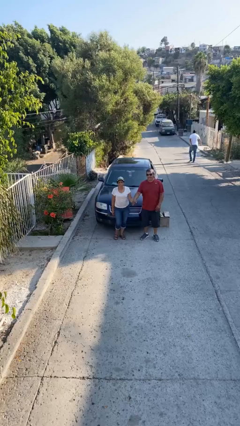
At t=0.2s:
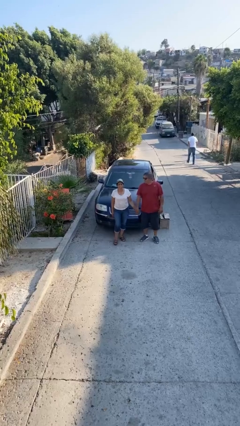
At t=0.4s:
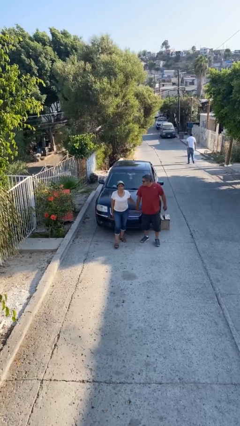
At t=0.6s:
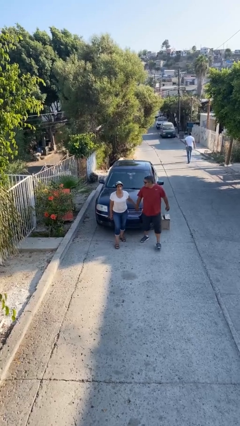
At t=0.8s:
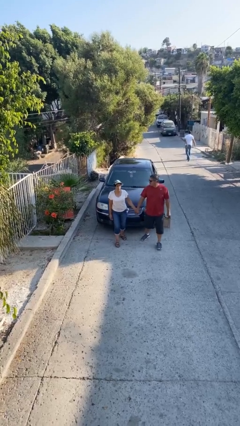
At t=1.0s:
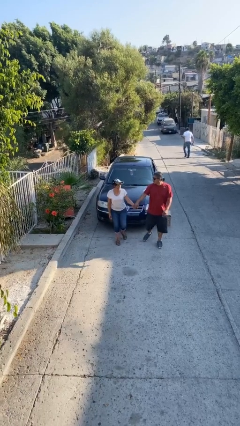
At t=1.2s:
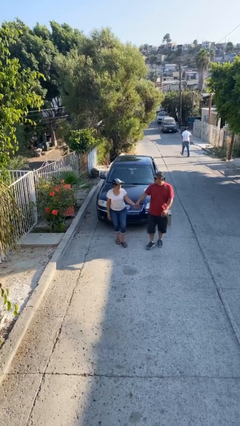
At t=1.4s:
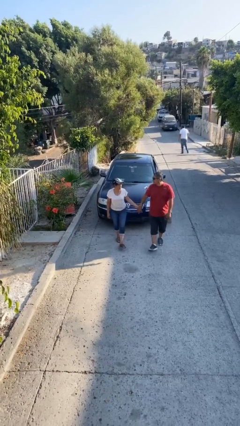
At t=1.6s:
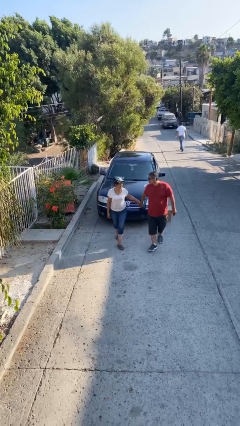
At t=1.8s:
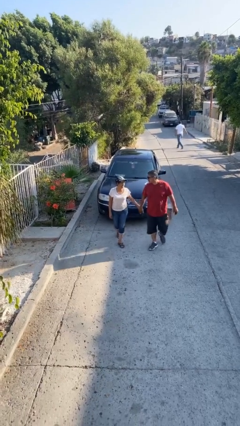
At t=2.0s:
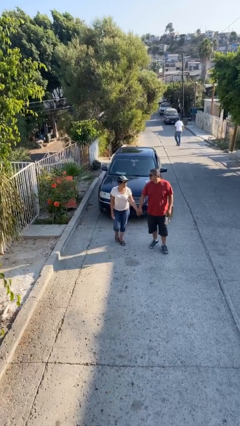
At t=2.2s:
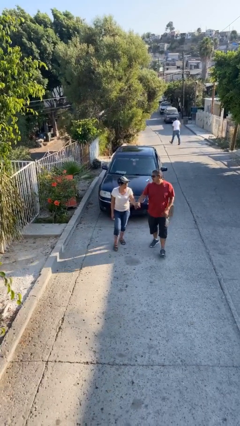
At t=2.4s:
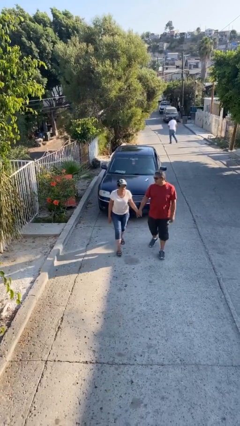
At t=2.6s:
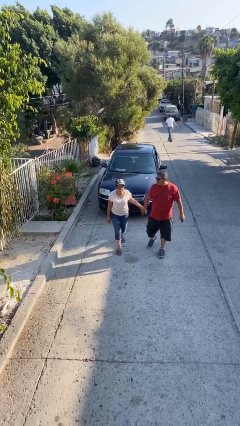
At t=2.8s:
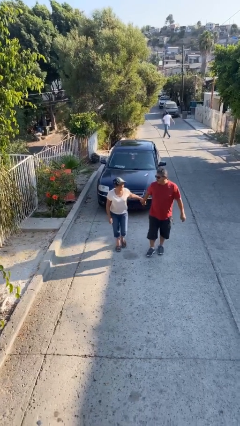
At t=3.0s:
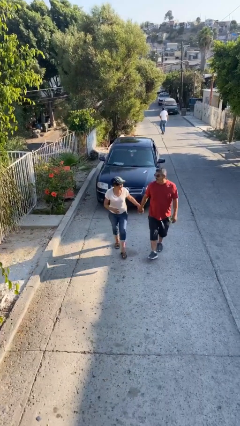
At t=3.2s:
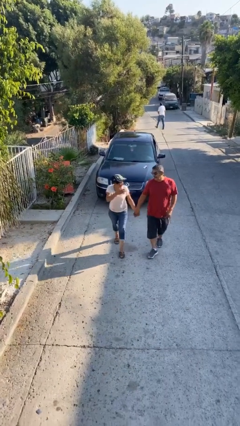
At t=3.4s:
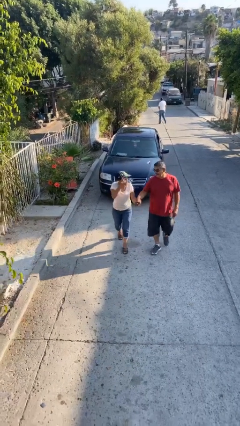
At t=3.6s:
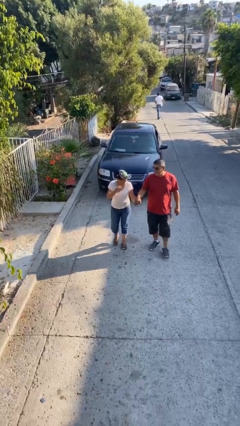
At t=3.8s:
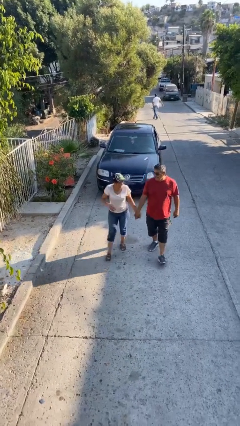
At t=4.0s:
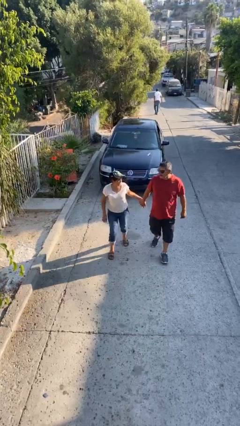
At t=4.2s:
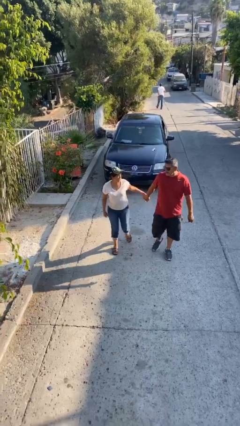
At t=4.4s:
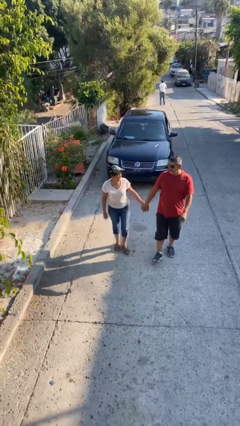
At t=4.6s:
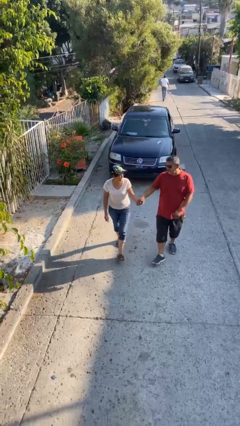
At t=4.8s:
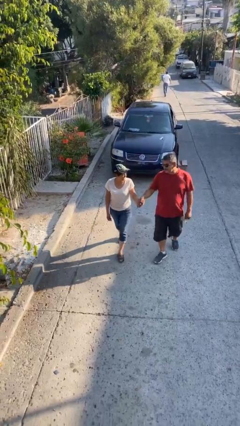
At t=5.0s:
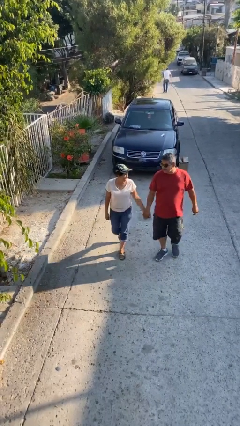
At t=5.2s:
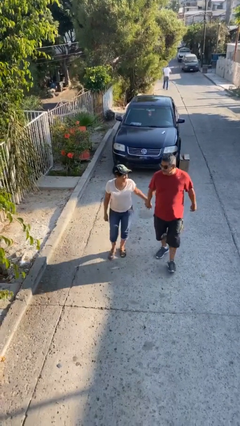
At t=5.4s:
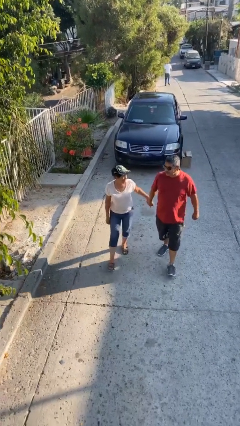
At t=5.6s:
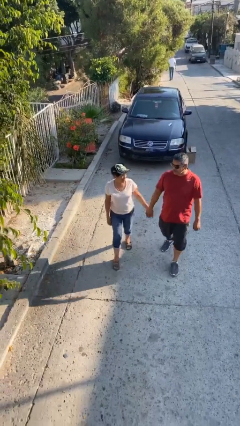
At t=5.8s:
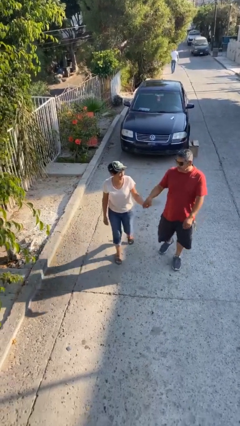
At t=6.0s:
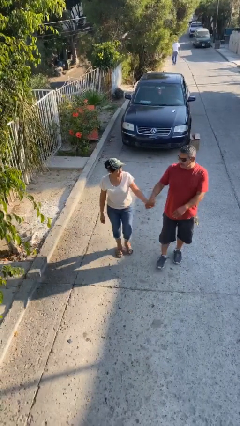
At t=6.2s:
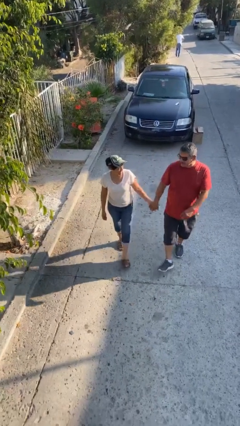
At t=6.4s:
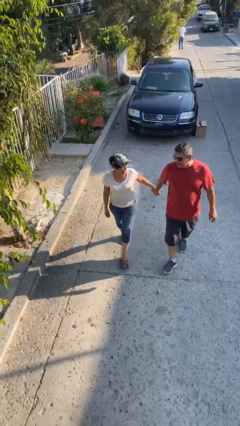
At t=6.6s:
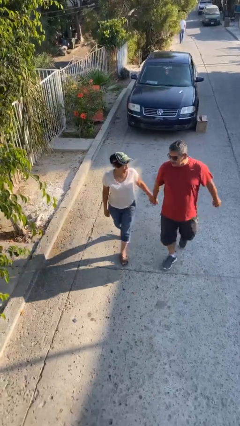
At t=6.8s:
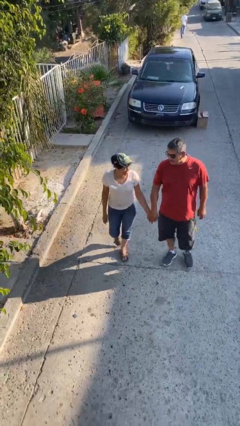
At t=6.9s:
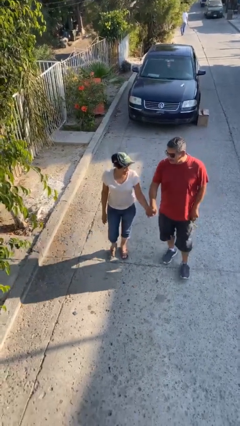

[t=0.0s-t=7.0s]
person holds hand

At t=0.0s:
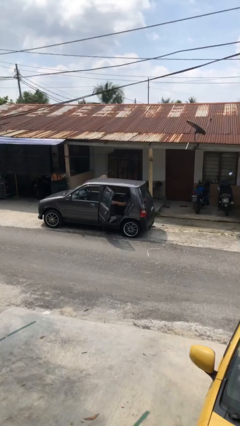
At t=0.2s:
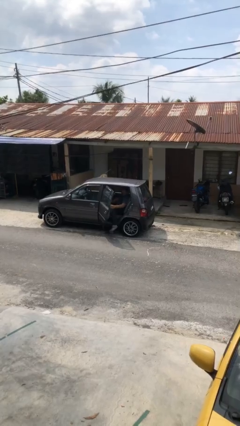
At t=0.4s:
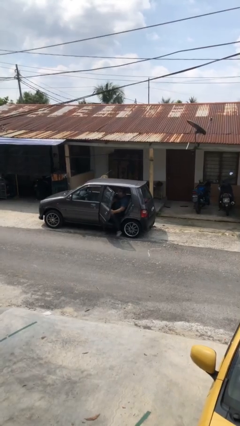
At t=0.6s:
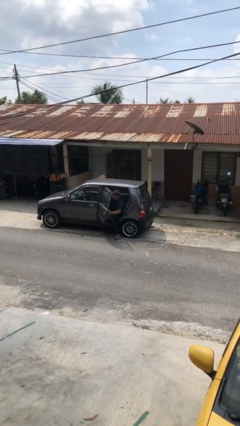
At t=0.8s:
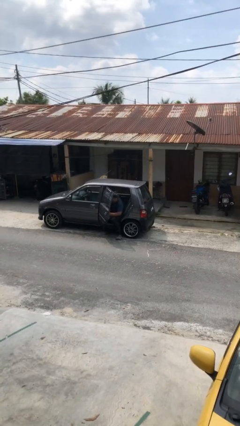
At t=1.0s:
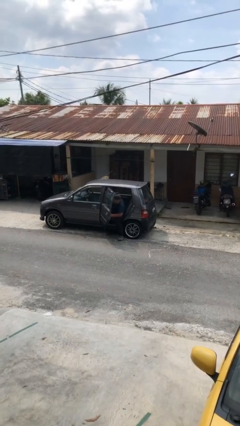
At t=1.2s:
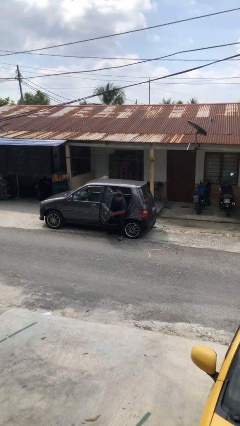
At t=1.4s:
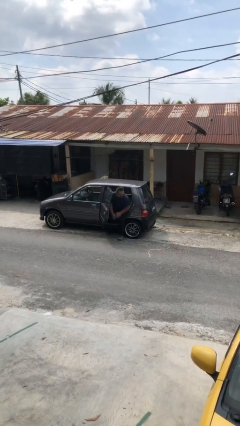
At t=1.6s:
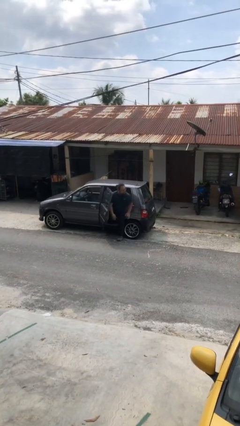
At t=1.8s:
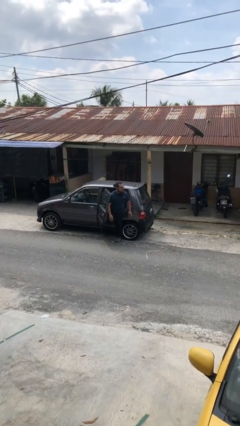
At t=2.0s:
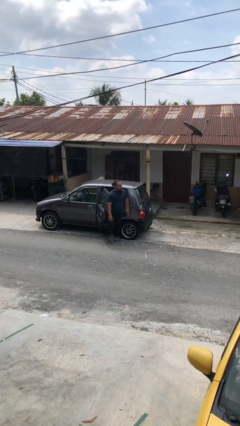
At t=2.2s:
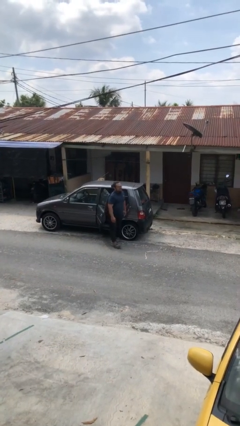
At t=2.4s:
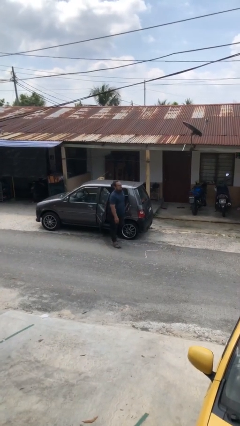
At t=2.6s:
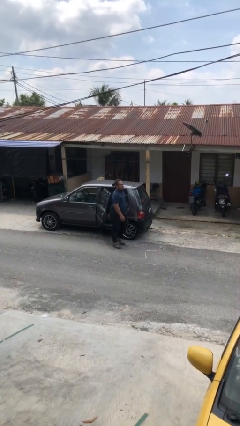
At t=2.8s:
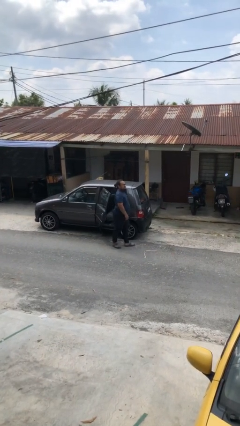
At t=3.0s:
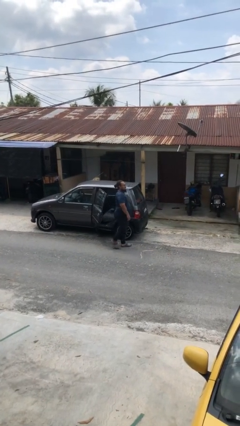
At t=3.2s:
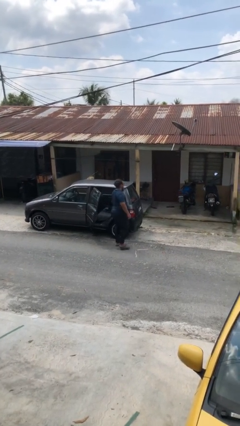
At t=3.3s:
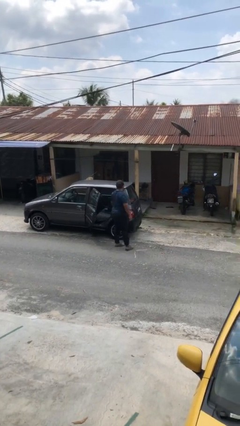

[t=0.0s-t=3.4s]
person exits car

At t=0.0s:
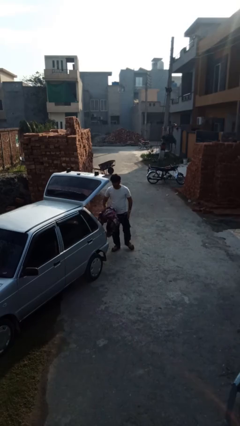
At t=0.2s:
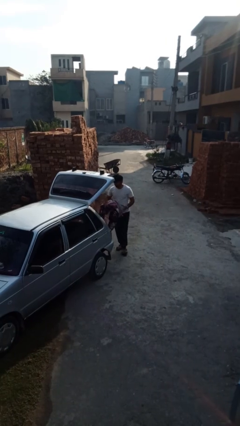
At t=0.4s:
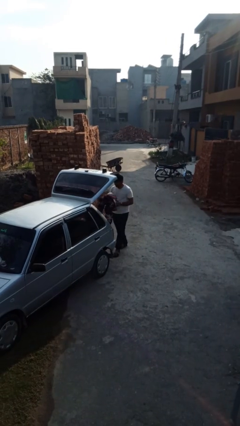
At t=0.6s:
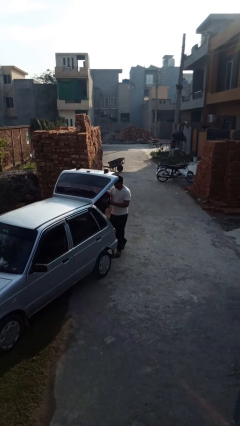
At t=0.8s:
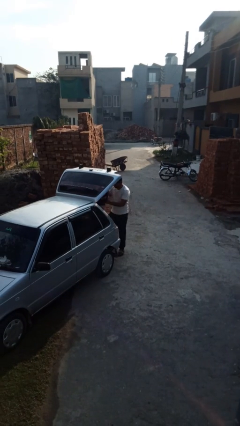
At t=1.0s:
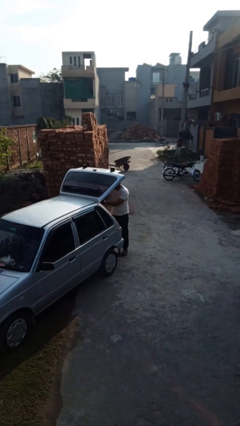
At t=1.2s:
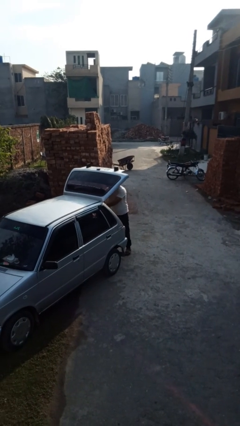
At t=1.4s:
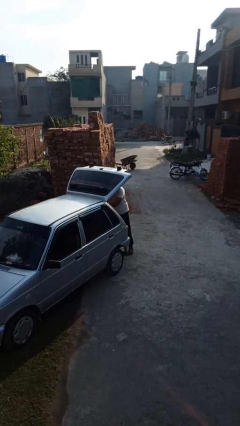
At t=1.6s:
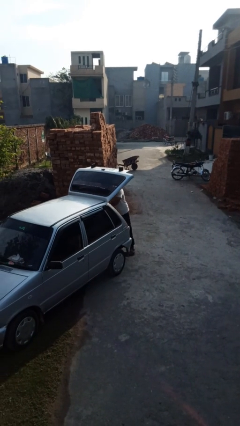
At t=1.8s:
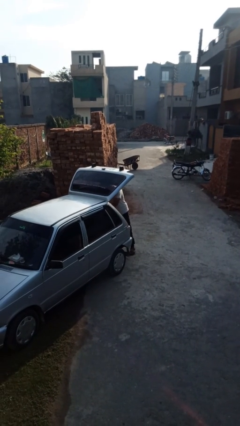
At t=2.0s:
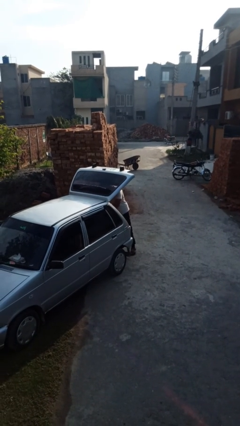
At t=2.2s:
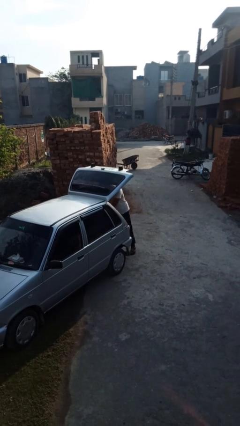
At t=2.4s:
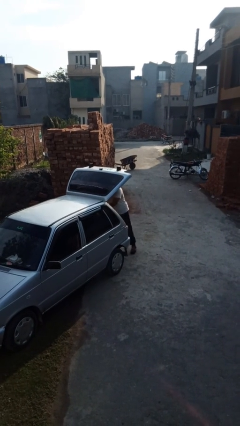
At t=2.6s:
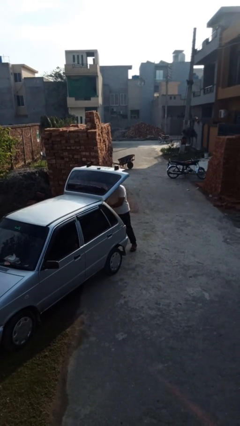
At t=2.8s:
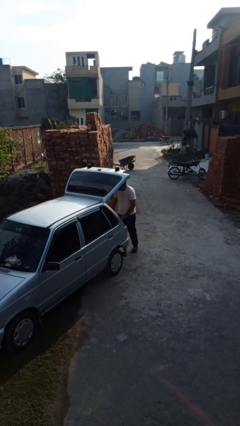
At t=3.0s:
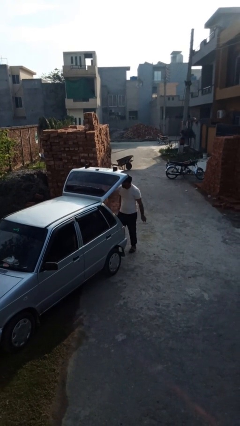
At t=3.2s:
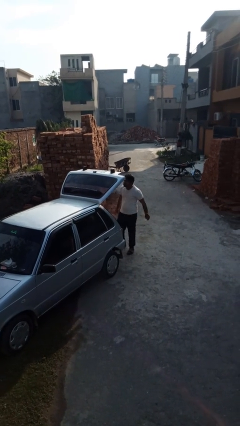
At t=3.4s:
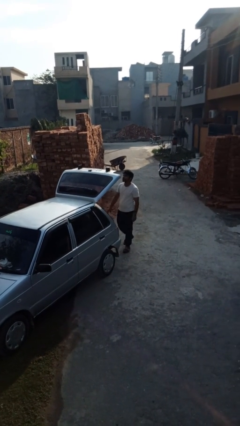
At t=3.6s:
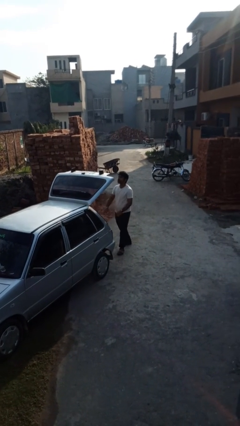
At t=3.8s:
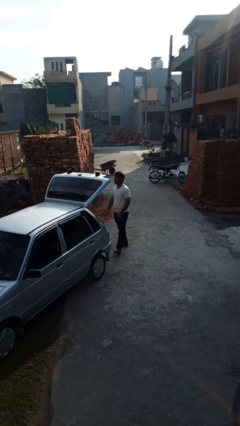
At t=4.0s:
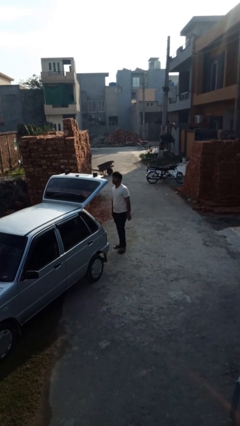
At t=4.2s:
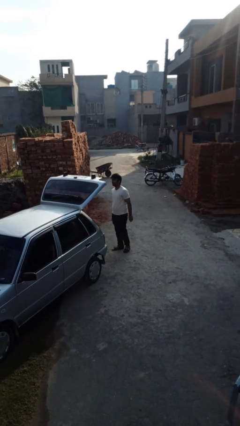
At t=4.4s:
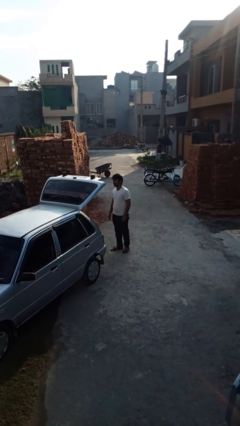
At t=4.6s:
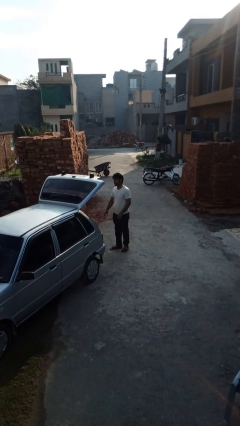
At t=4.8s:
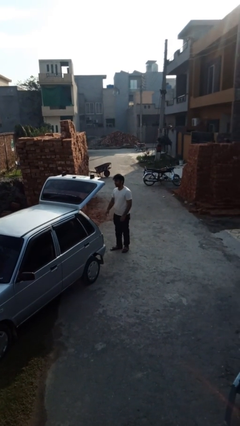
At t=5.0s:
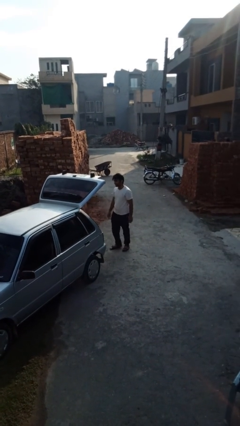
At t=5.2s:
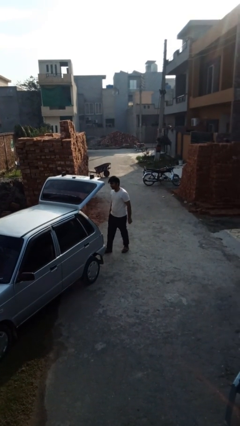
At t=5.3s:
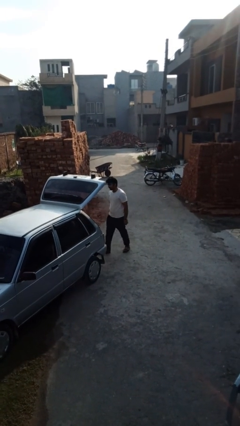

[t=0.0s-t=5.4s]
person loads car

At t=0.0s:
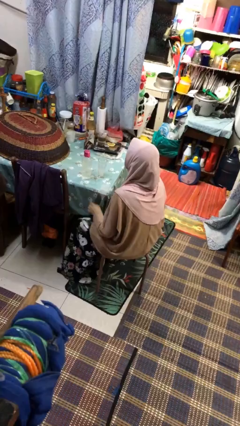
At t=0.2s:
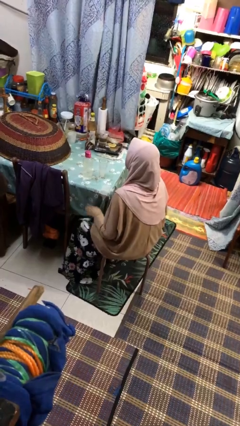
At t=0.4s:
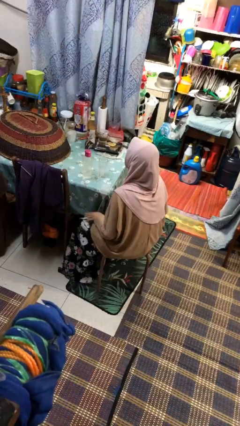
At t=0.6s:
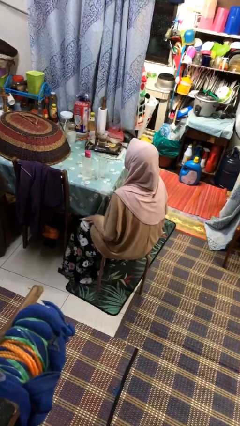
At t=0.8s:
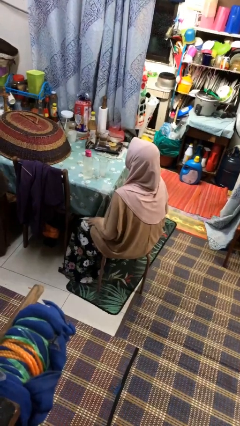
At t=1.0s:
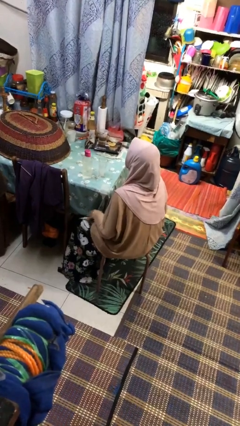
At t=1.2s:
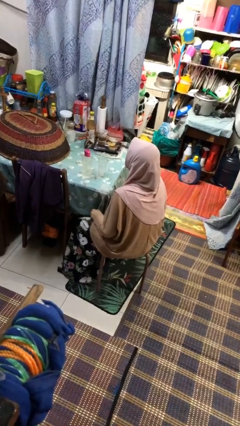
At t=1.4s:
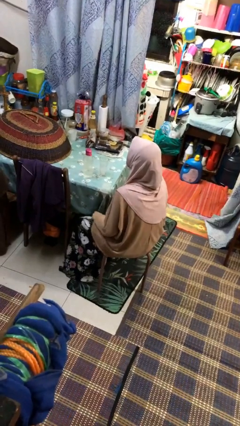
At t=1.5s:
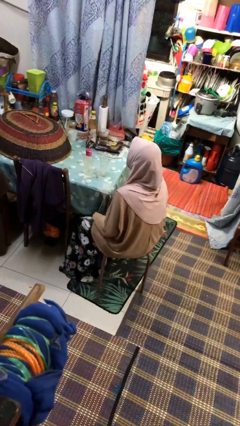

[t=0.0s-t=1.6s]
person slaps hands on thighs

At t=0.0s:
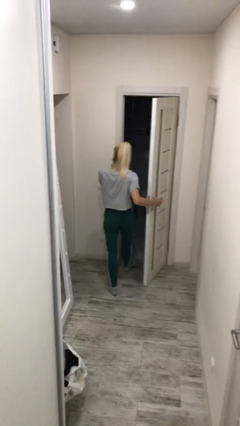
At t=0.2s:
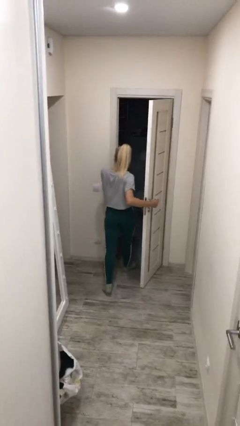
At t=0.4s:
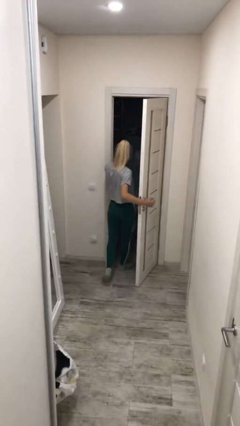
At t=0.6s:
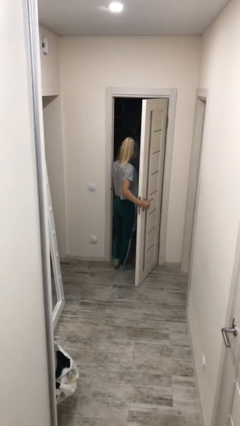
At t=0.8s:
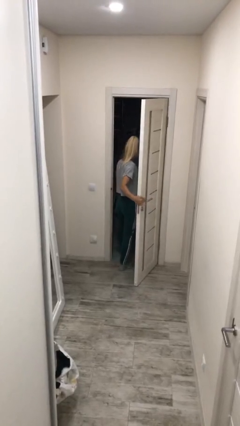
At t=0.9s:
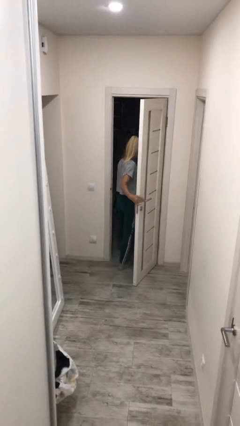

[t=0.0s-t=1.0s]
person exits scene through structure
